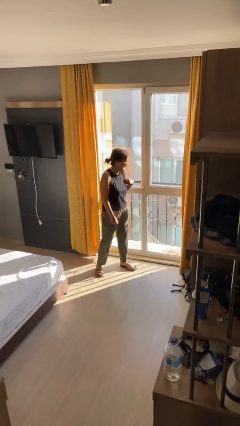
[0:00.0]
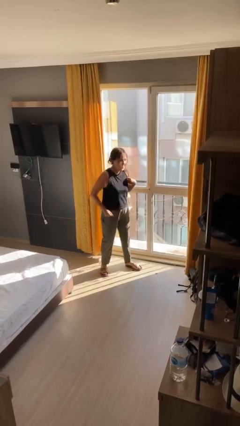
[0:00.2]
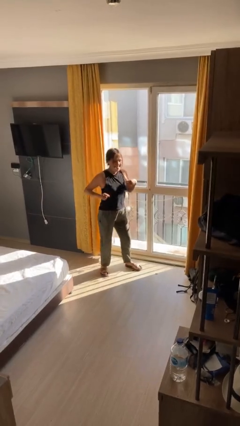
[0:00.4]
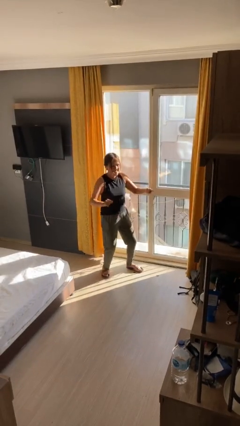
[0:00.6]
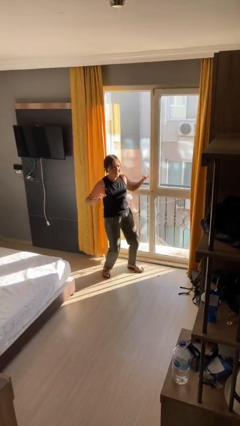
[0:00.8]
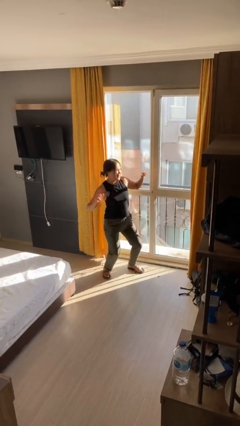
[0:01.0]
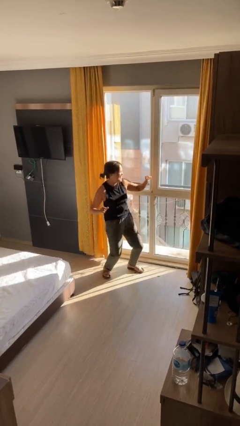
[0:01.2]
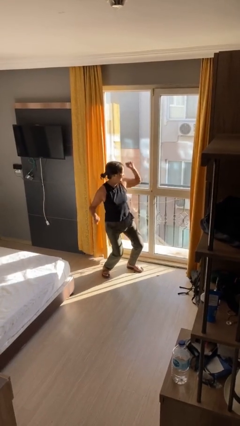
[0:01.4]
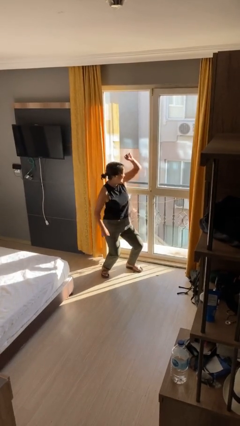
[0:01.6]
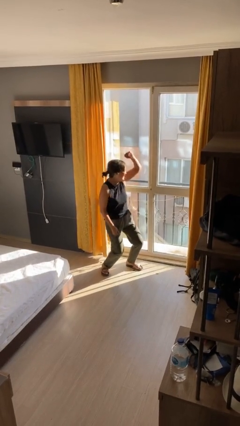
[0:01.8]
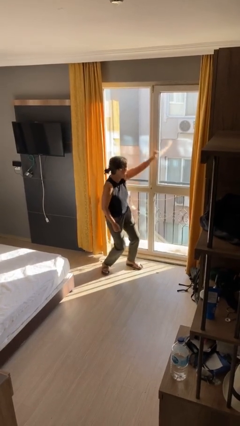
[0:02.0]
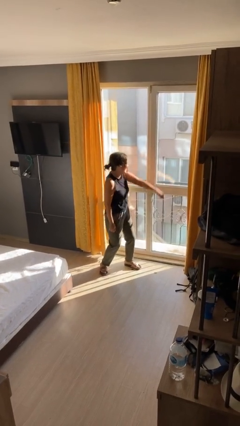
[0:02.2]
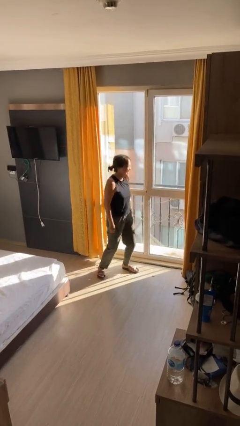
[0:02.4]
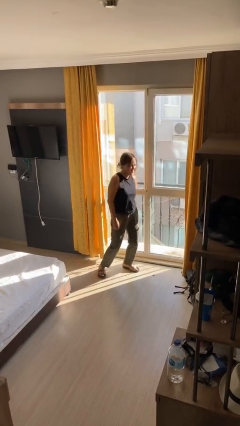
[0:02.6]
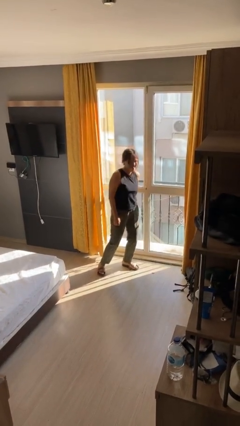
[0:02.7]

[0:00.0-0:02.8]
person dances in place

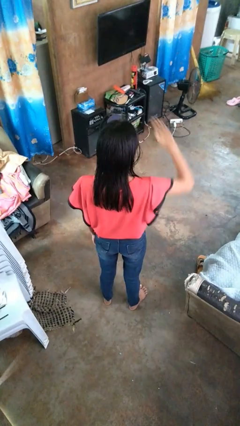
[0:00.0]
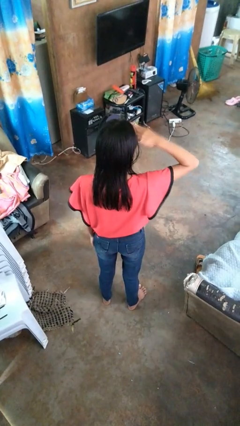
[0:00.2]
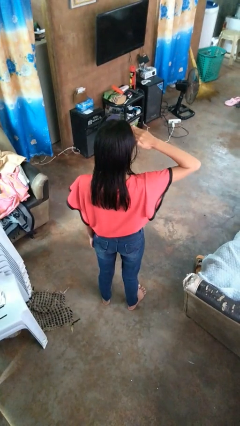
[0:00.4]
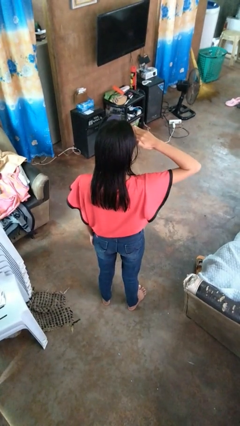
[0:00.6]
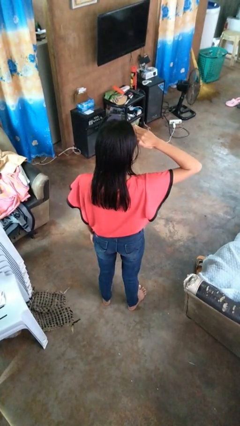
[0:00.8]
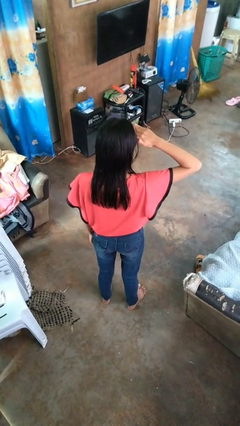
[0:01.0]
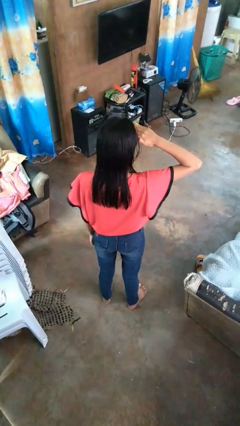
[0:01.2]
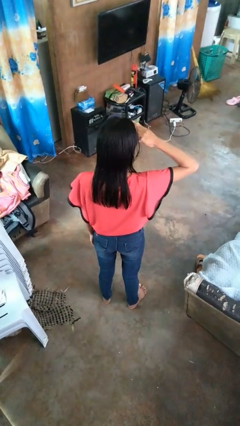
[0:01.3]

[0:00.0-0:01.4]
person salutes

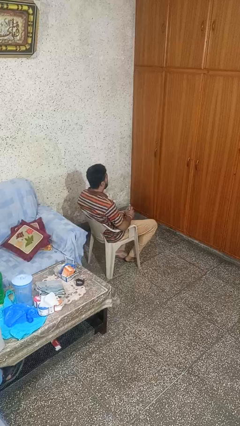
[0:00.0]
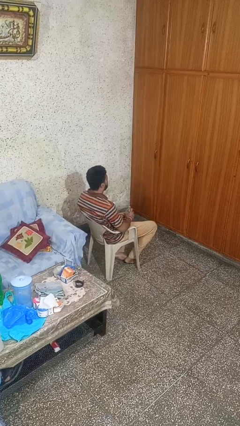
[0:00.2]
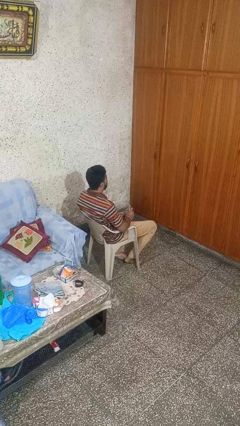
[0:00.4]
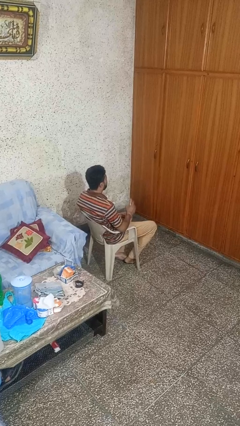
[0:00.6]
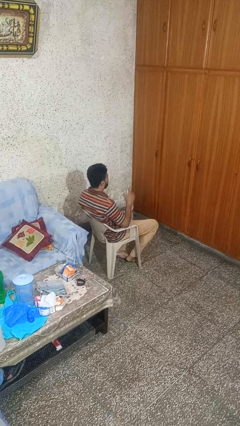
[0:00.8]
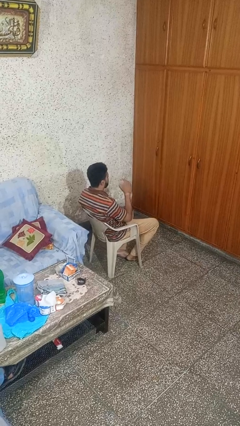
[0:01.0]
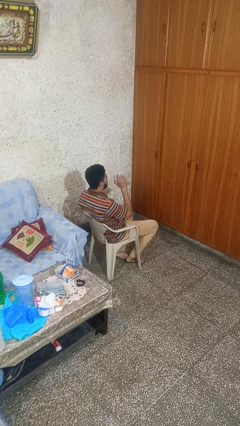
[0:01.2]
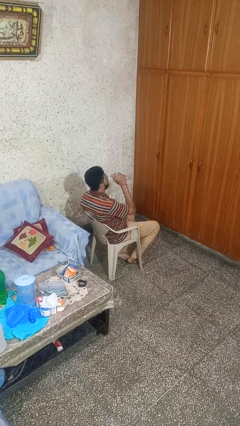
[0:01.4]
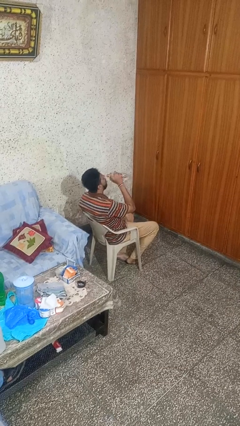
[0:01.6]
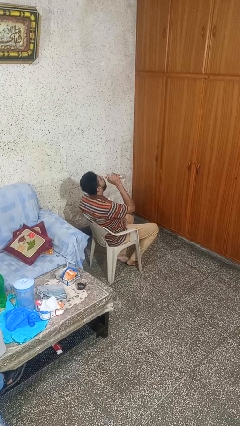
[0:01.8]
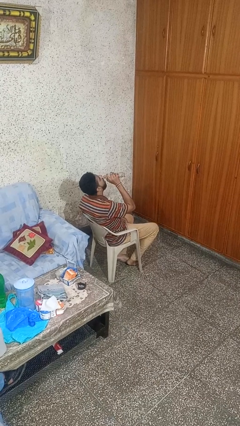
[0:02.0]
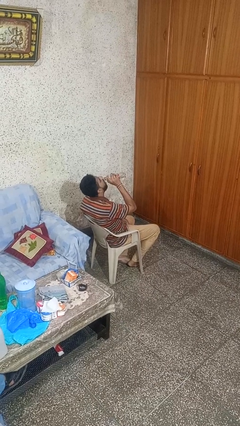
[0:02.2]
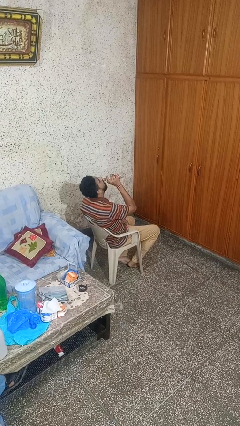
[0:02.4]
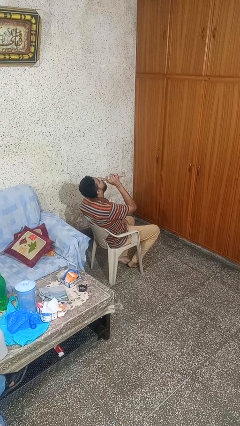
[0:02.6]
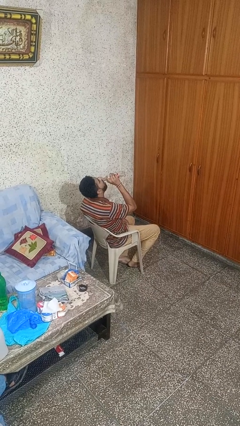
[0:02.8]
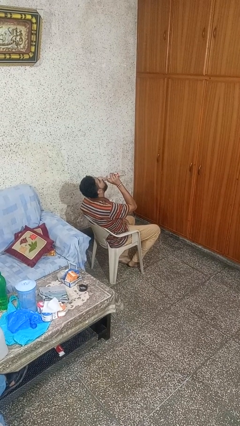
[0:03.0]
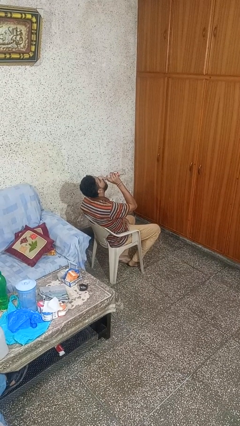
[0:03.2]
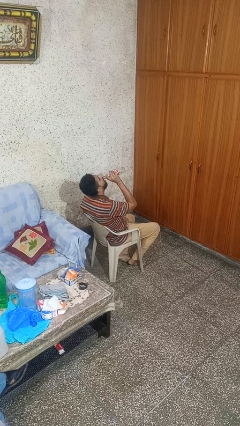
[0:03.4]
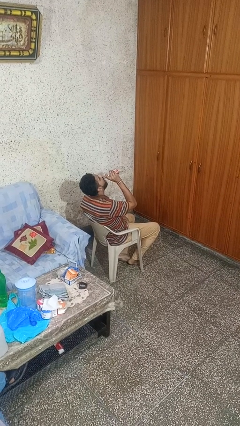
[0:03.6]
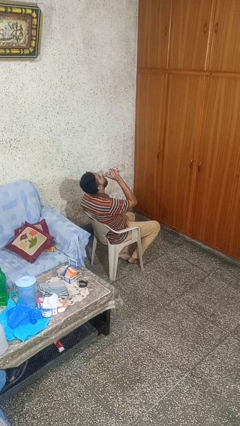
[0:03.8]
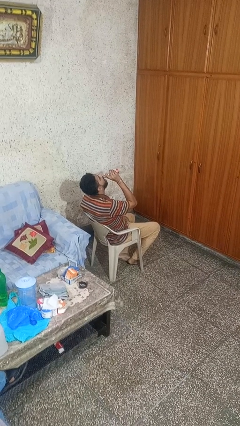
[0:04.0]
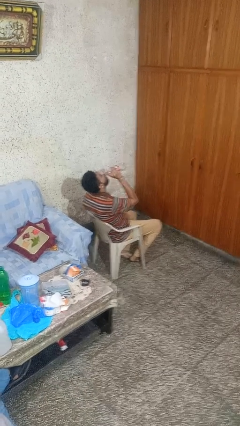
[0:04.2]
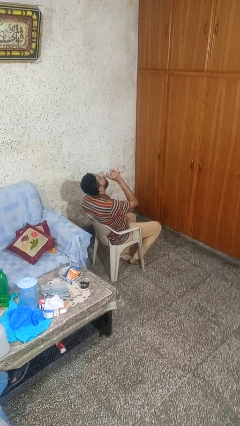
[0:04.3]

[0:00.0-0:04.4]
person drinks from bottle

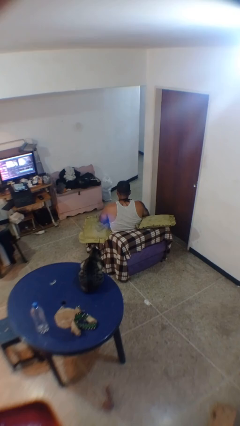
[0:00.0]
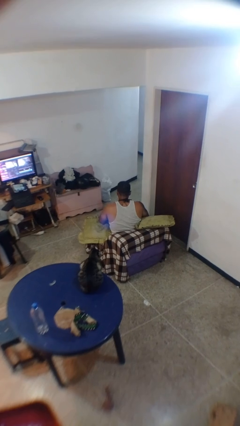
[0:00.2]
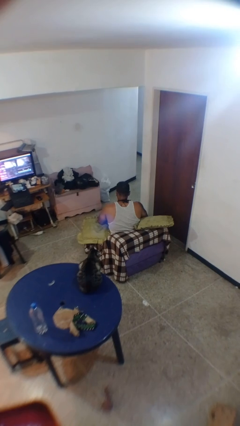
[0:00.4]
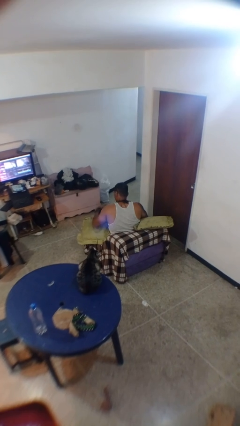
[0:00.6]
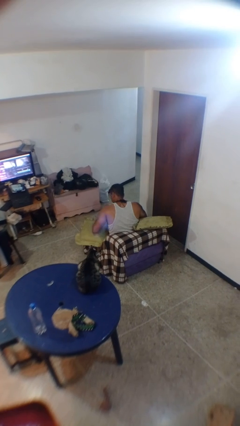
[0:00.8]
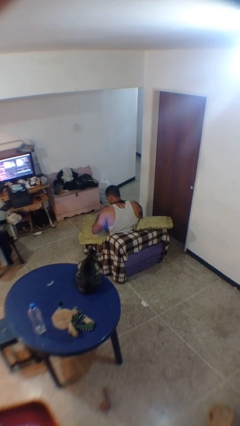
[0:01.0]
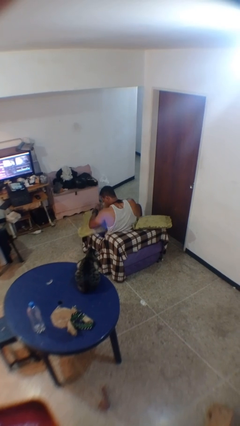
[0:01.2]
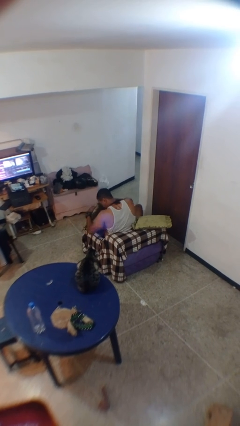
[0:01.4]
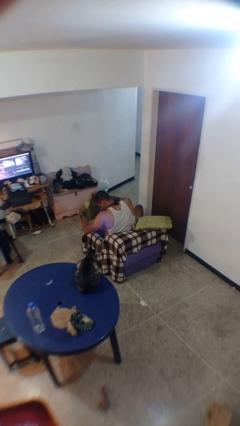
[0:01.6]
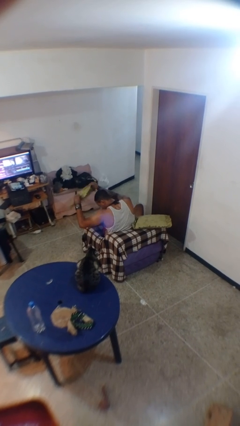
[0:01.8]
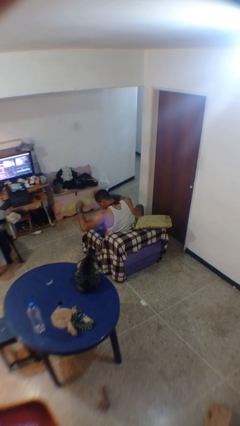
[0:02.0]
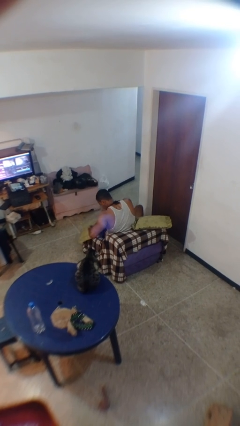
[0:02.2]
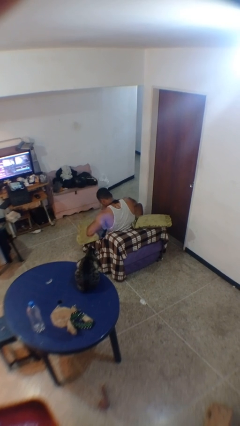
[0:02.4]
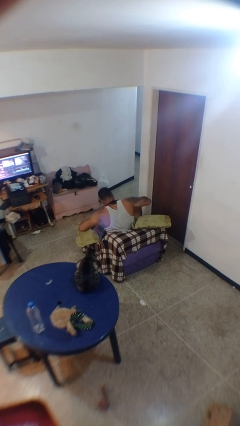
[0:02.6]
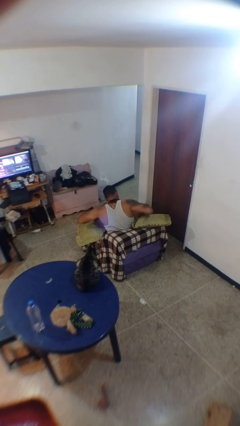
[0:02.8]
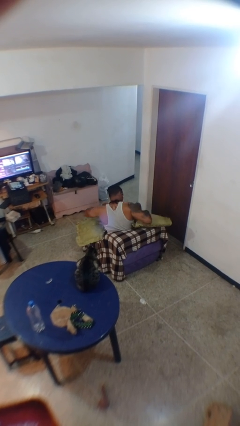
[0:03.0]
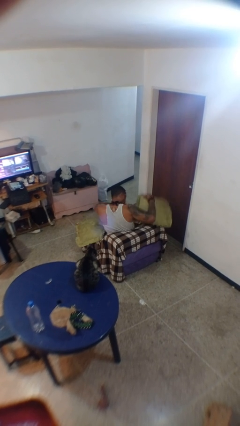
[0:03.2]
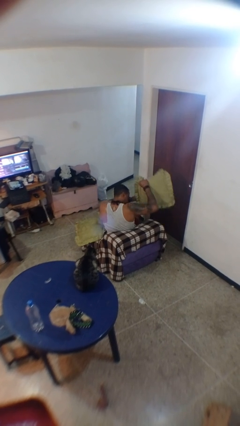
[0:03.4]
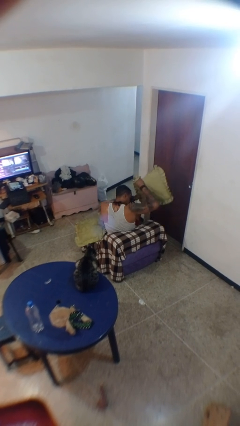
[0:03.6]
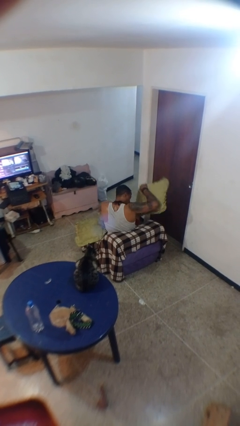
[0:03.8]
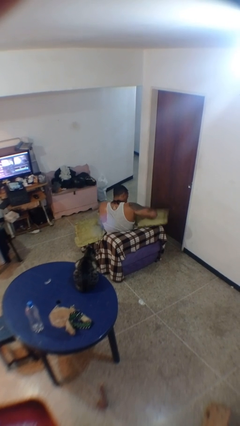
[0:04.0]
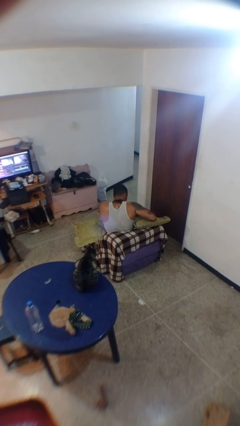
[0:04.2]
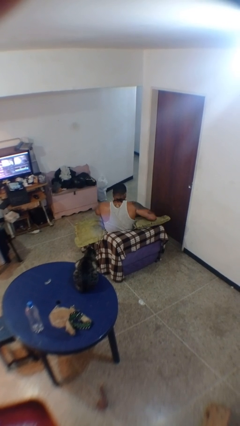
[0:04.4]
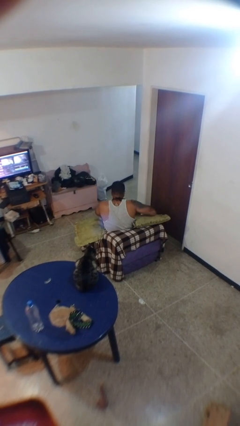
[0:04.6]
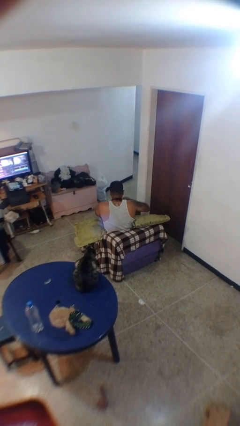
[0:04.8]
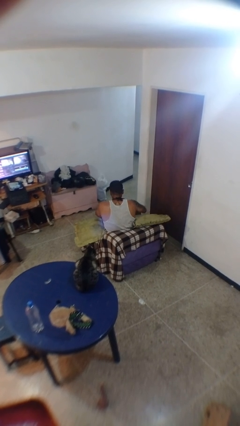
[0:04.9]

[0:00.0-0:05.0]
person searches in couch

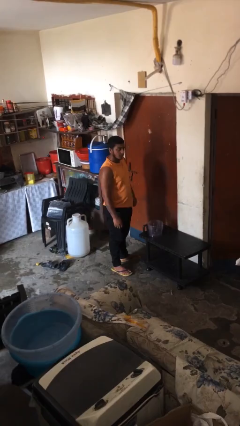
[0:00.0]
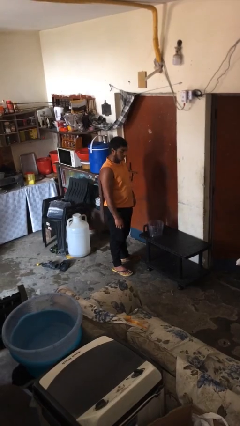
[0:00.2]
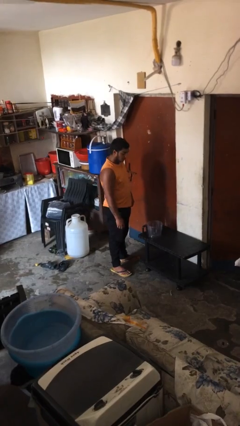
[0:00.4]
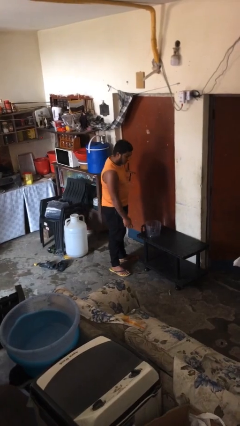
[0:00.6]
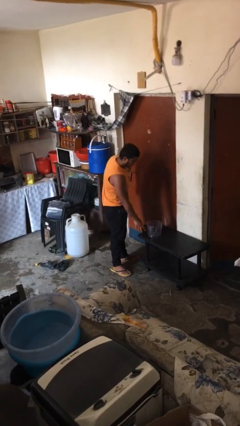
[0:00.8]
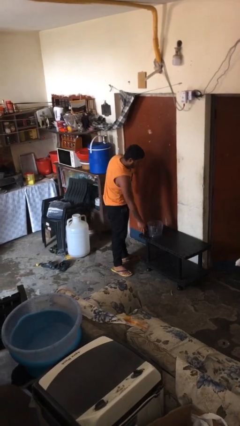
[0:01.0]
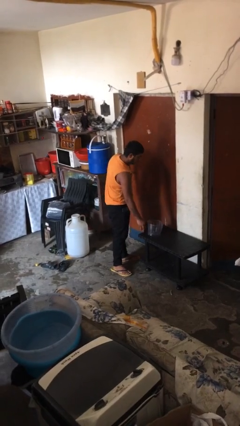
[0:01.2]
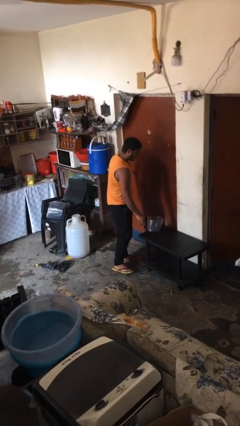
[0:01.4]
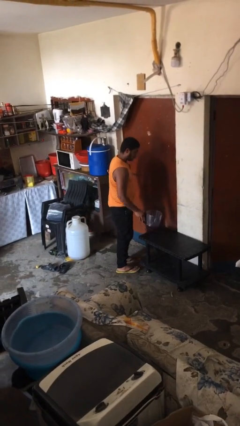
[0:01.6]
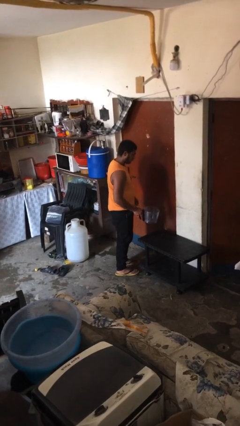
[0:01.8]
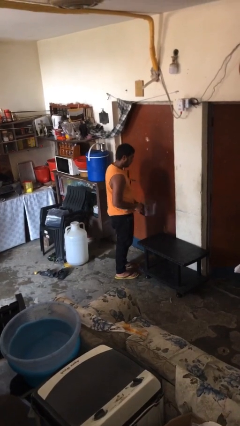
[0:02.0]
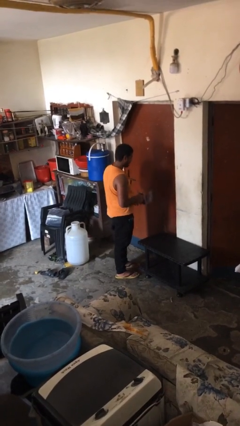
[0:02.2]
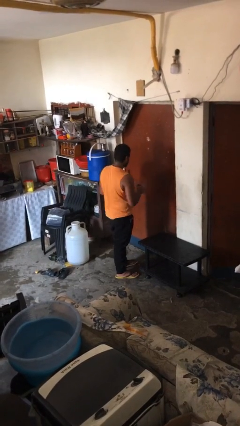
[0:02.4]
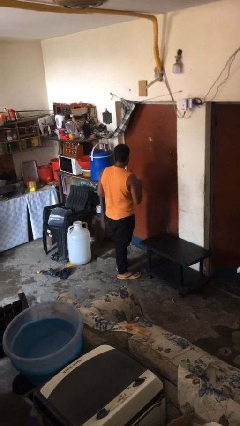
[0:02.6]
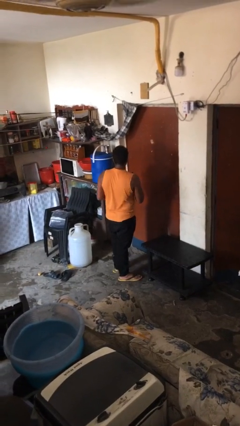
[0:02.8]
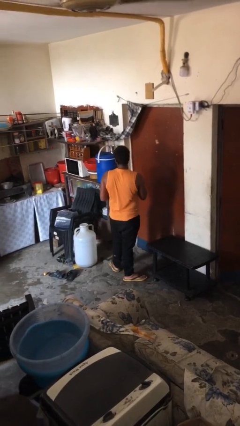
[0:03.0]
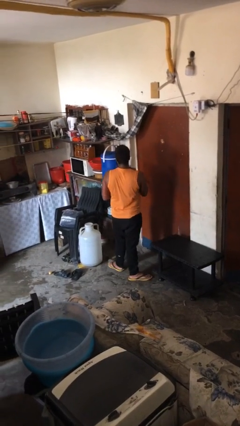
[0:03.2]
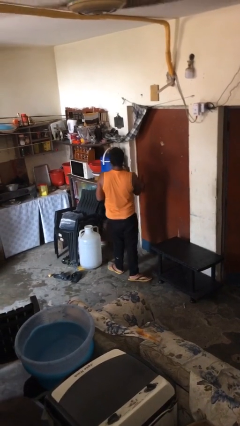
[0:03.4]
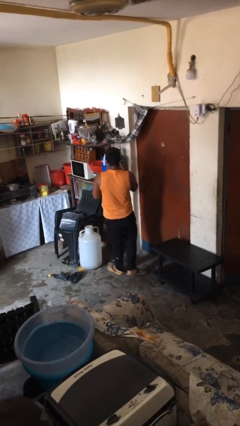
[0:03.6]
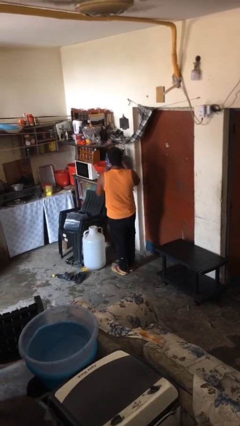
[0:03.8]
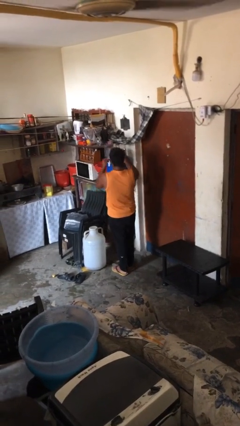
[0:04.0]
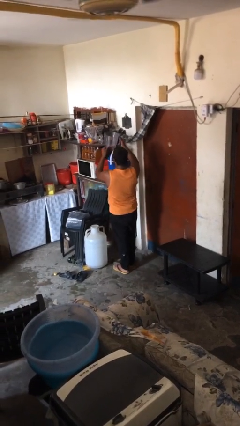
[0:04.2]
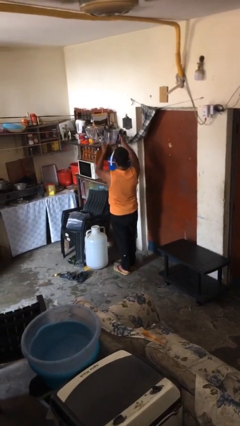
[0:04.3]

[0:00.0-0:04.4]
person picks up object from table
